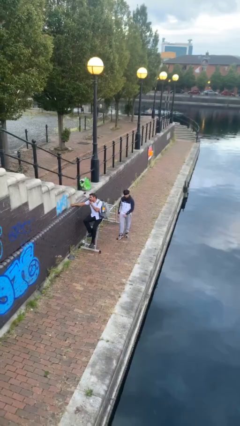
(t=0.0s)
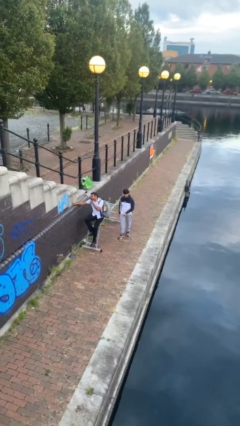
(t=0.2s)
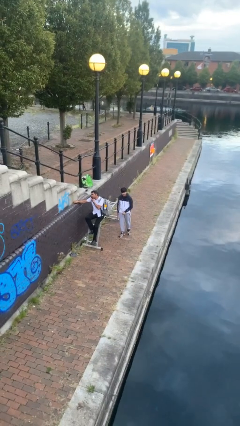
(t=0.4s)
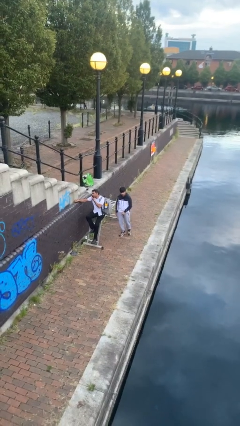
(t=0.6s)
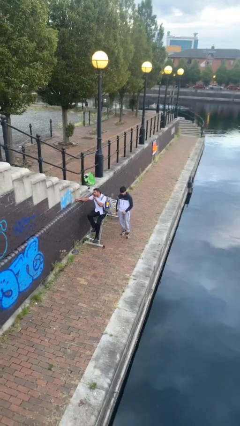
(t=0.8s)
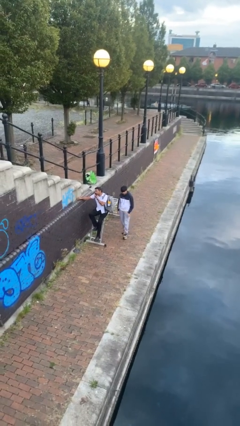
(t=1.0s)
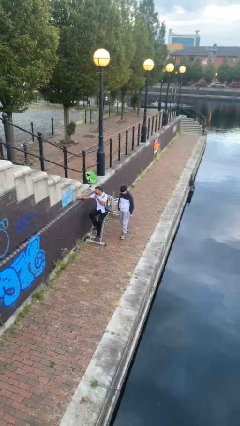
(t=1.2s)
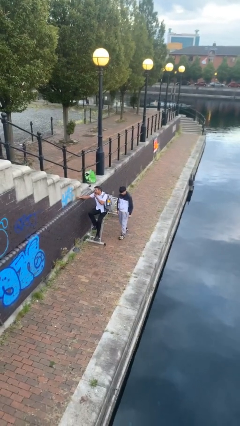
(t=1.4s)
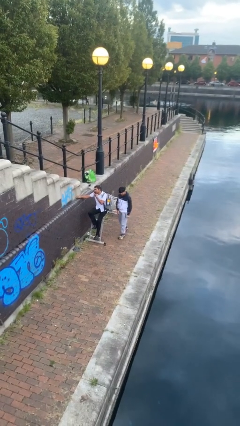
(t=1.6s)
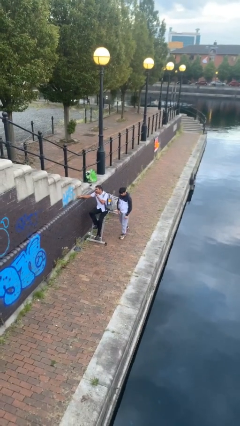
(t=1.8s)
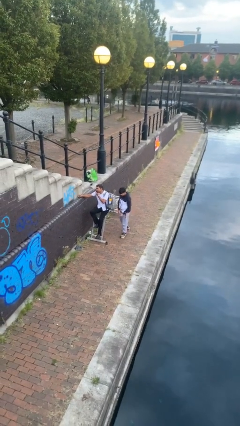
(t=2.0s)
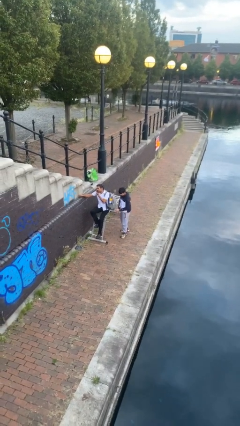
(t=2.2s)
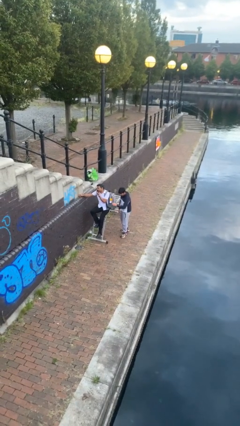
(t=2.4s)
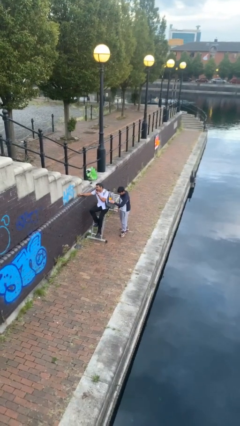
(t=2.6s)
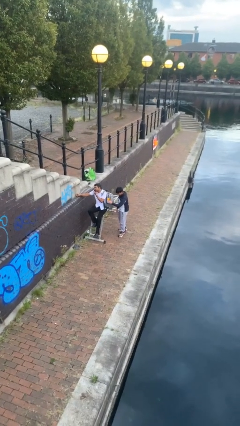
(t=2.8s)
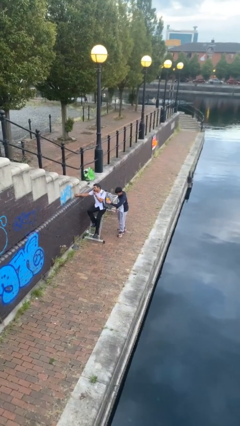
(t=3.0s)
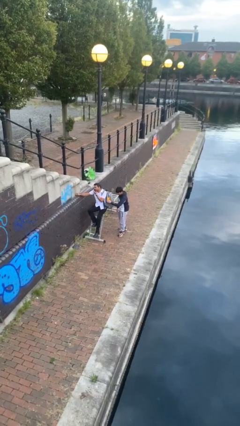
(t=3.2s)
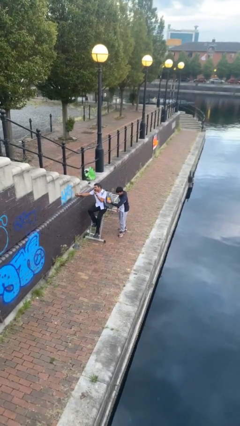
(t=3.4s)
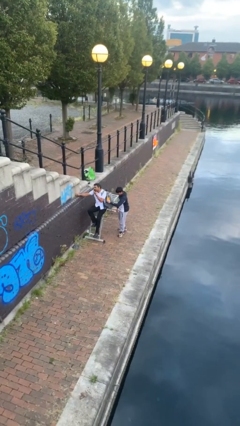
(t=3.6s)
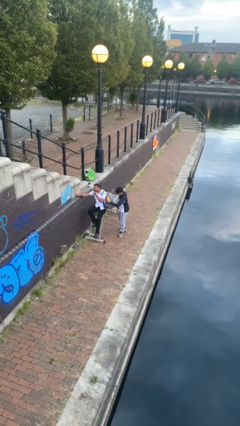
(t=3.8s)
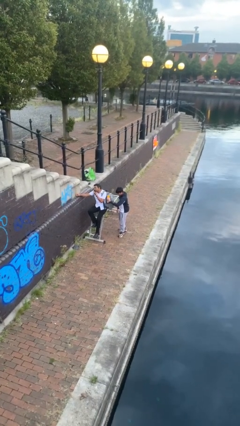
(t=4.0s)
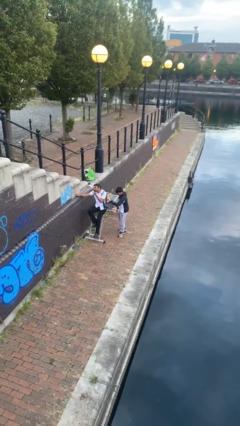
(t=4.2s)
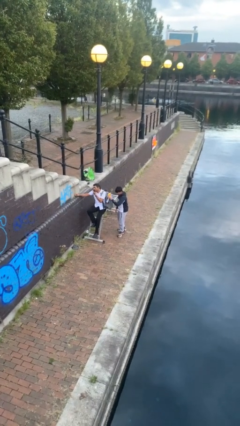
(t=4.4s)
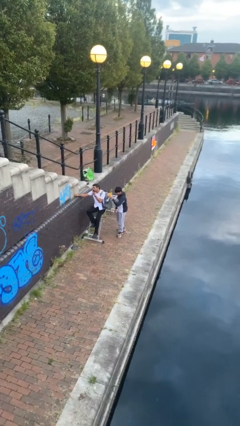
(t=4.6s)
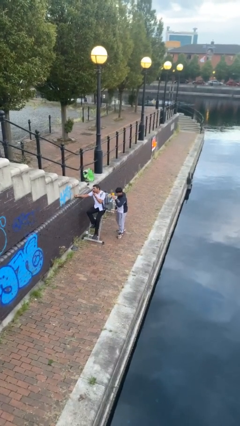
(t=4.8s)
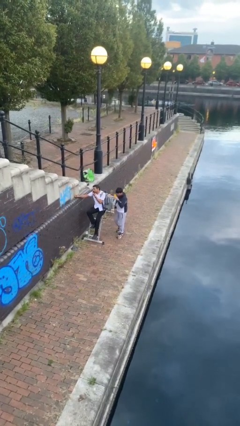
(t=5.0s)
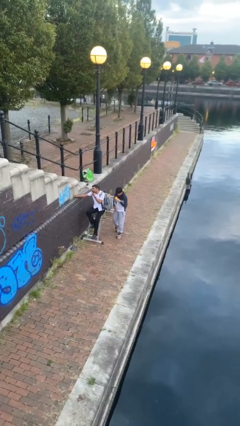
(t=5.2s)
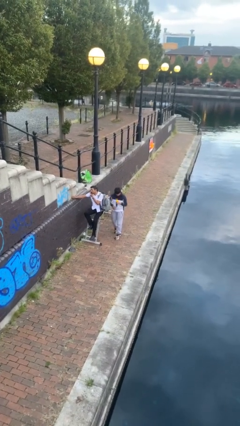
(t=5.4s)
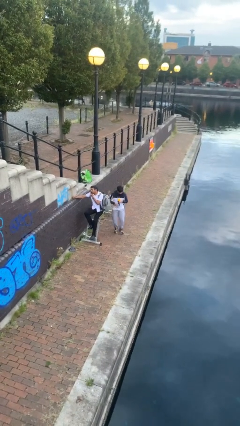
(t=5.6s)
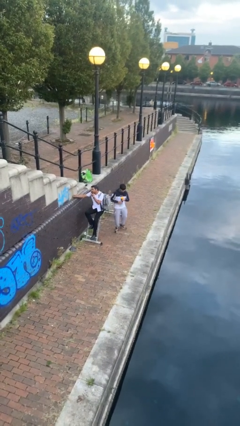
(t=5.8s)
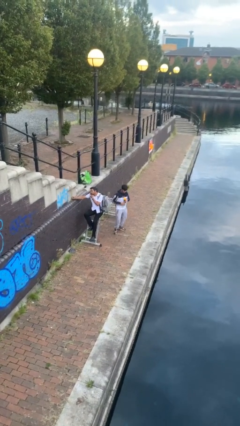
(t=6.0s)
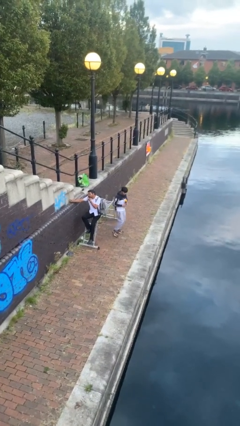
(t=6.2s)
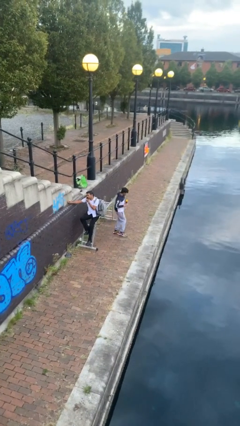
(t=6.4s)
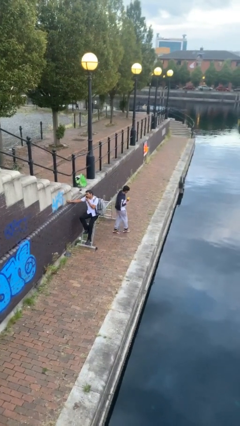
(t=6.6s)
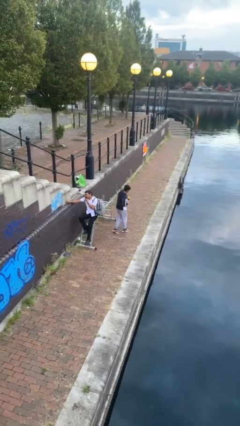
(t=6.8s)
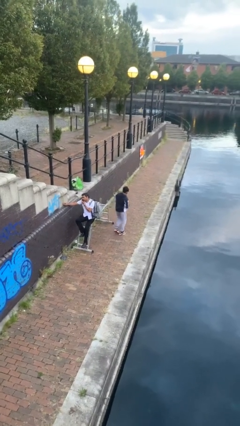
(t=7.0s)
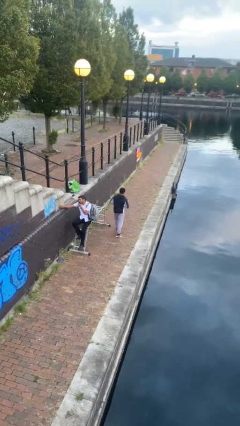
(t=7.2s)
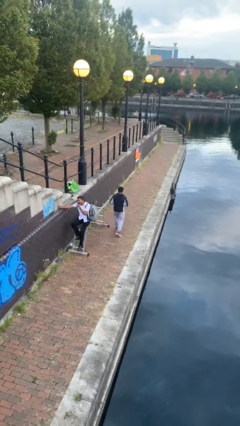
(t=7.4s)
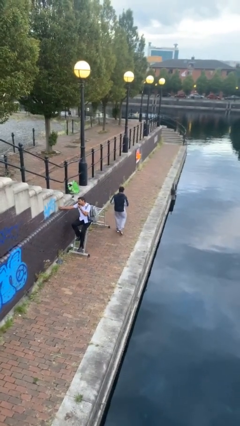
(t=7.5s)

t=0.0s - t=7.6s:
person steals object from person

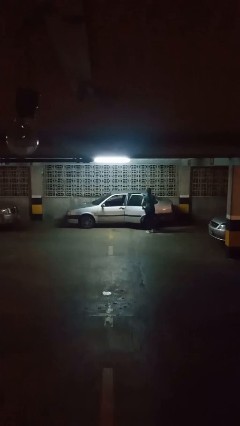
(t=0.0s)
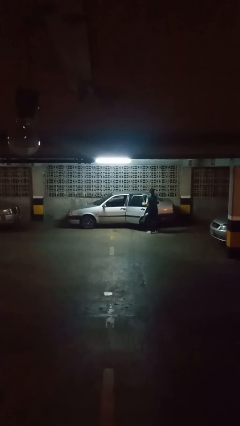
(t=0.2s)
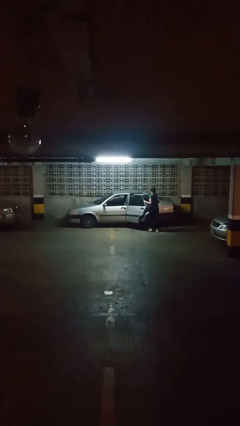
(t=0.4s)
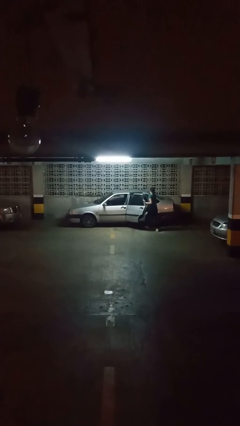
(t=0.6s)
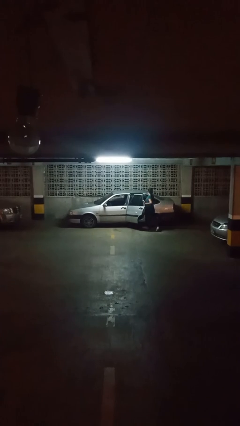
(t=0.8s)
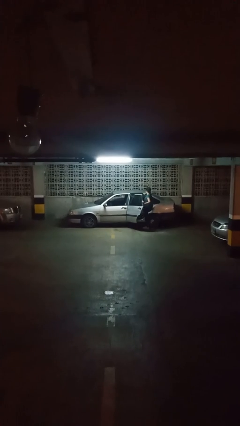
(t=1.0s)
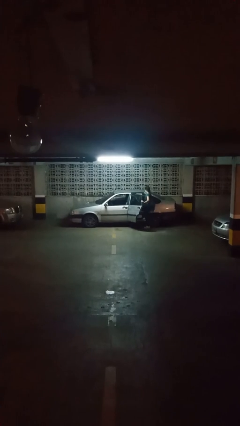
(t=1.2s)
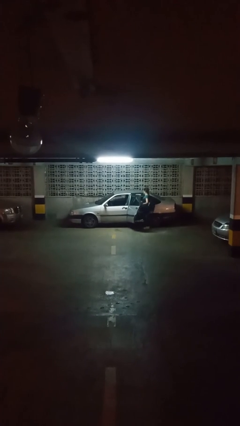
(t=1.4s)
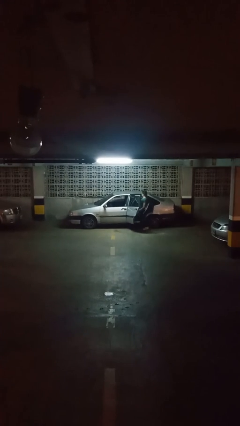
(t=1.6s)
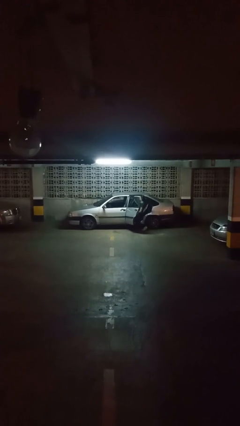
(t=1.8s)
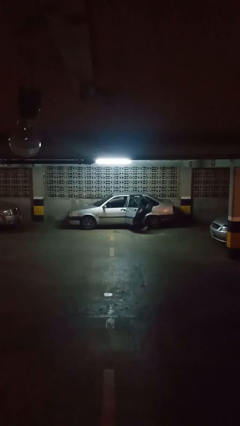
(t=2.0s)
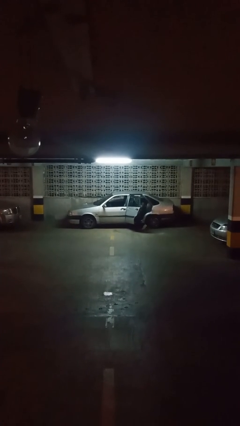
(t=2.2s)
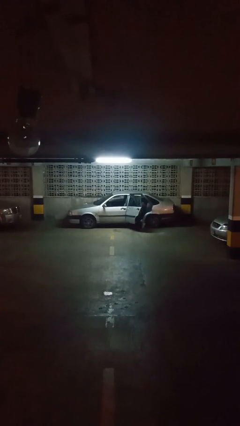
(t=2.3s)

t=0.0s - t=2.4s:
car picks up person

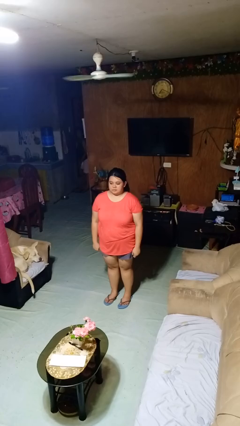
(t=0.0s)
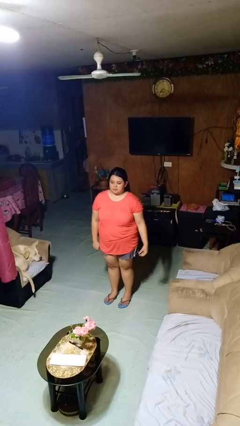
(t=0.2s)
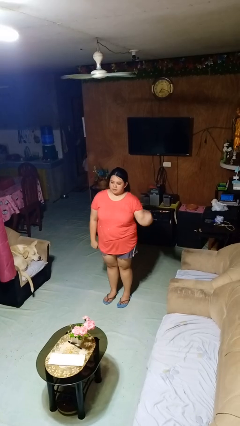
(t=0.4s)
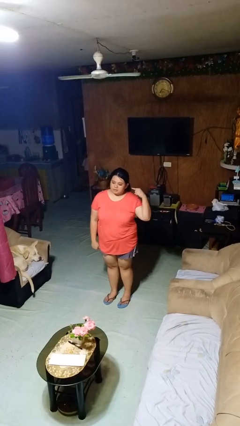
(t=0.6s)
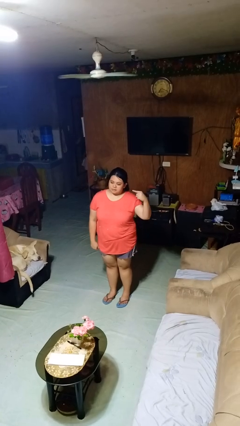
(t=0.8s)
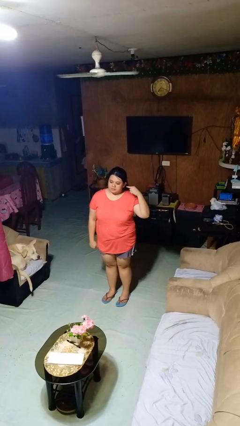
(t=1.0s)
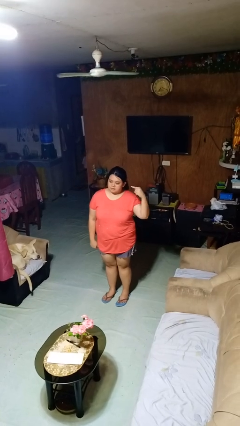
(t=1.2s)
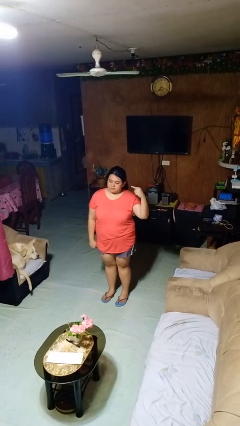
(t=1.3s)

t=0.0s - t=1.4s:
person gestures listen closely

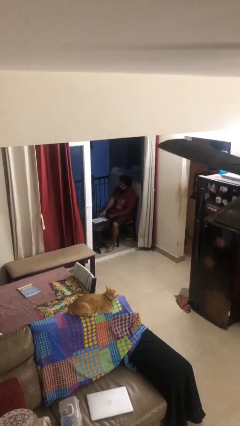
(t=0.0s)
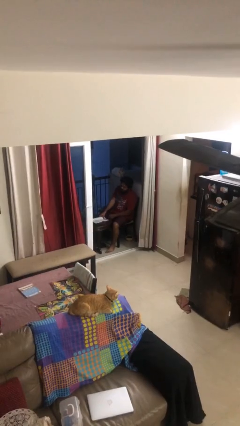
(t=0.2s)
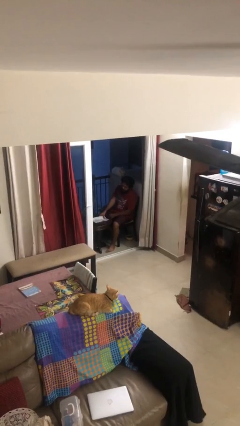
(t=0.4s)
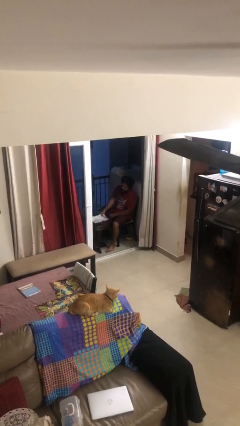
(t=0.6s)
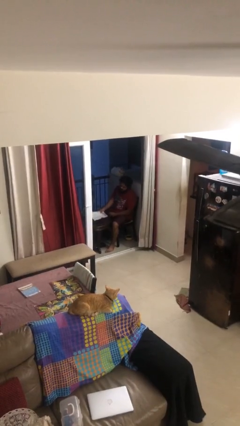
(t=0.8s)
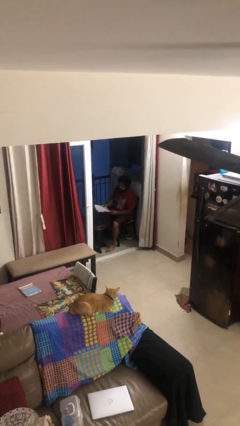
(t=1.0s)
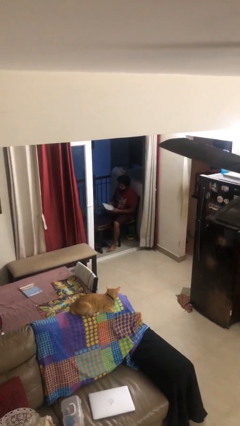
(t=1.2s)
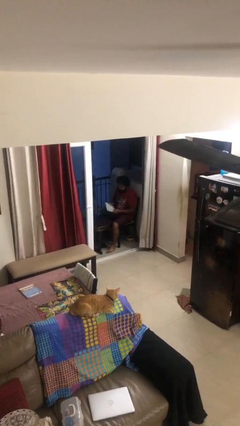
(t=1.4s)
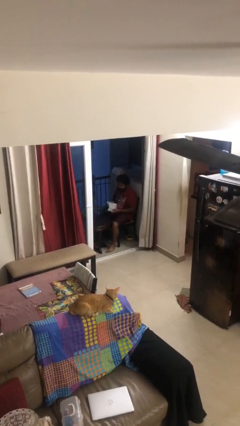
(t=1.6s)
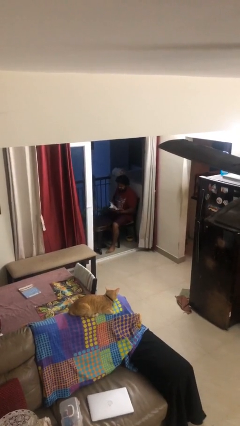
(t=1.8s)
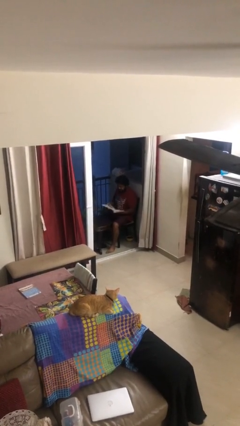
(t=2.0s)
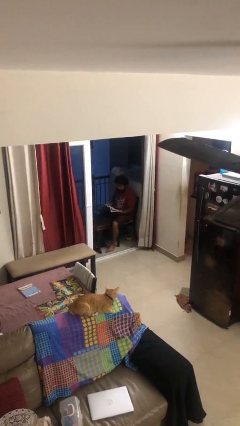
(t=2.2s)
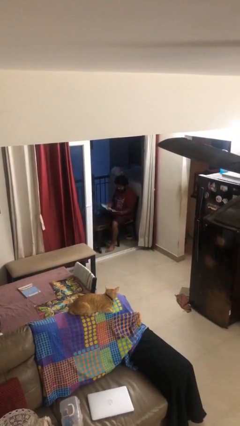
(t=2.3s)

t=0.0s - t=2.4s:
person picks up object from table

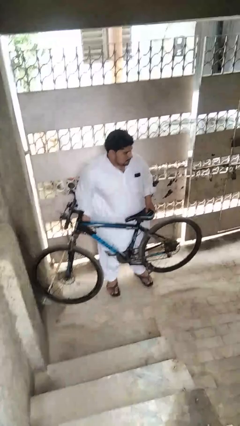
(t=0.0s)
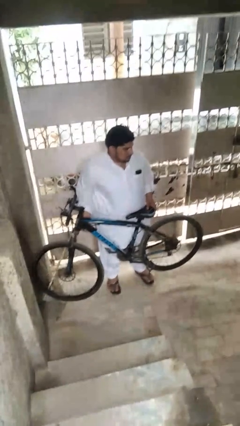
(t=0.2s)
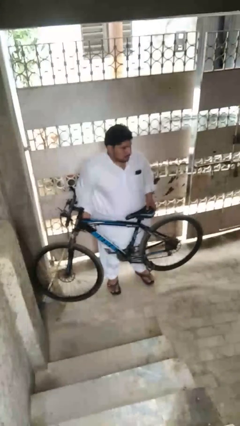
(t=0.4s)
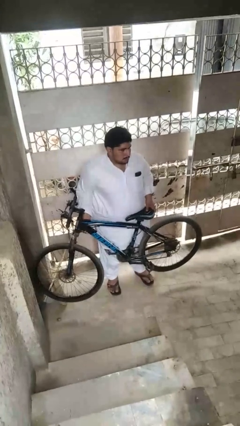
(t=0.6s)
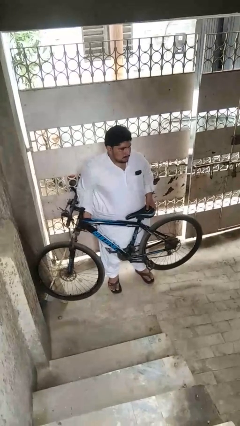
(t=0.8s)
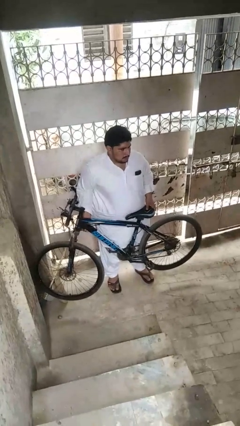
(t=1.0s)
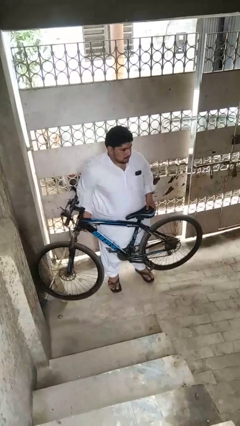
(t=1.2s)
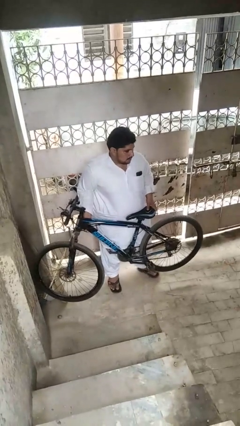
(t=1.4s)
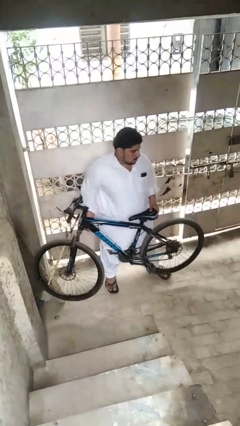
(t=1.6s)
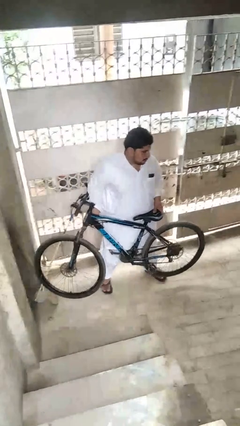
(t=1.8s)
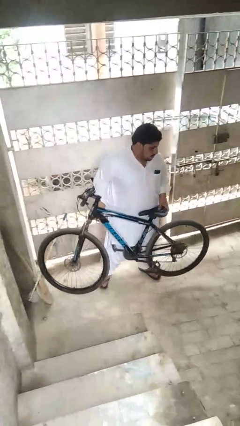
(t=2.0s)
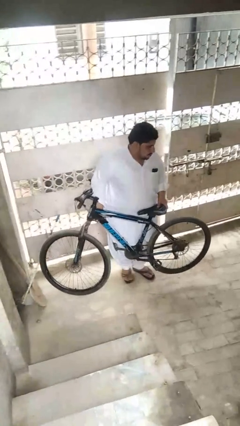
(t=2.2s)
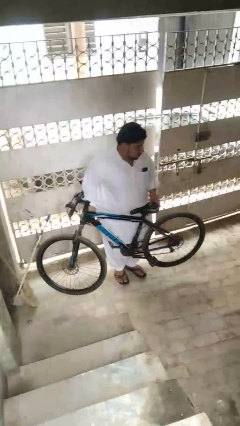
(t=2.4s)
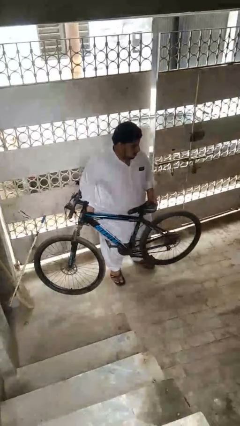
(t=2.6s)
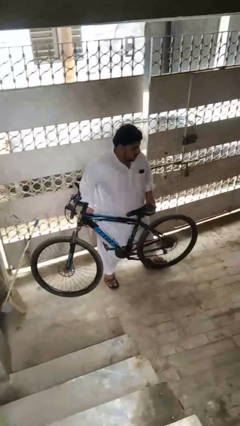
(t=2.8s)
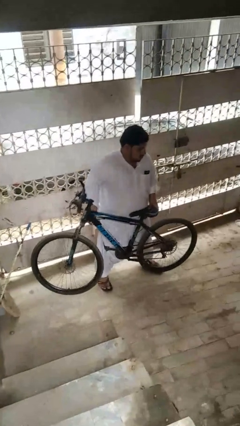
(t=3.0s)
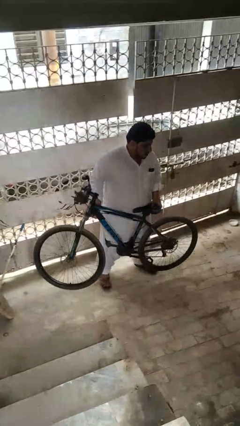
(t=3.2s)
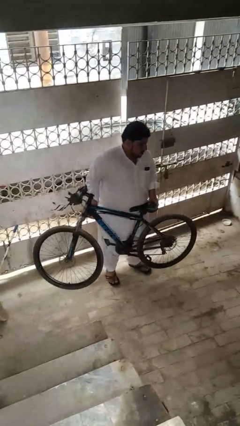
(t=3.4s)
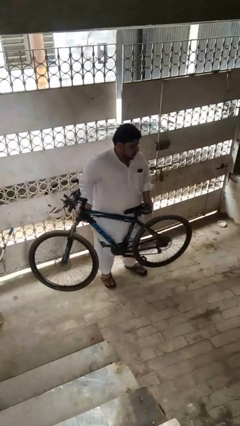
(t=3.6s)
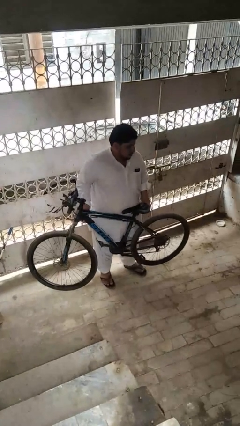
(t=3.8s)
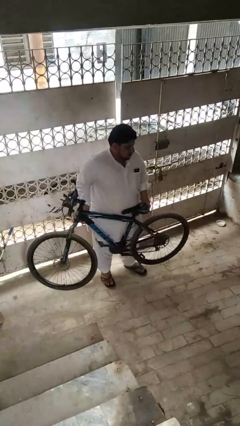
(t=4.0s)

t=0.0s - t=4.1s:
person carries bicycle
